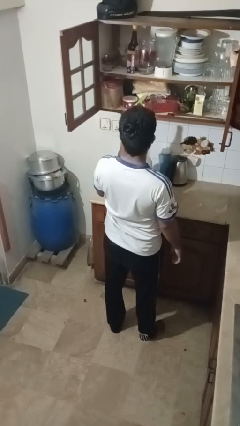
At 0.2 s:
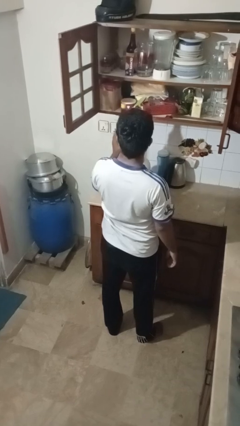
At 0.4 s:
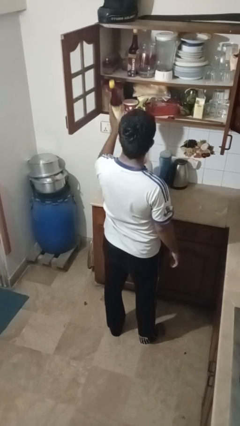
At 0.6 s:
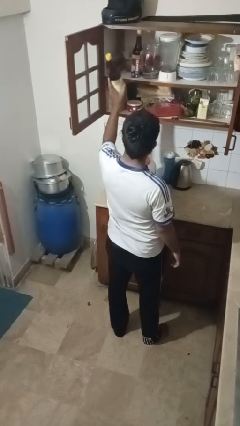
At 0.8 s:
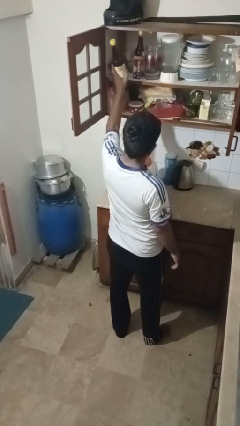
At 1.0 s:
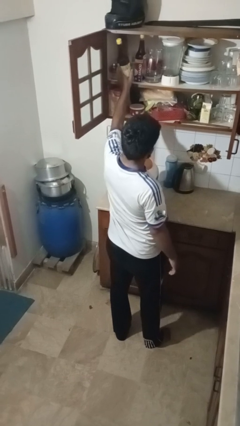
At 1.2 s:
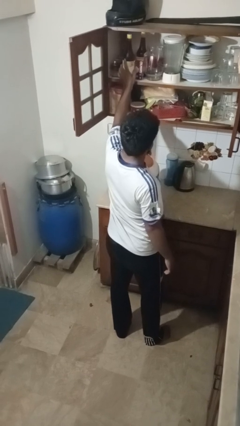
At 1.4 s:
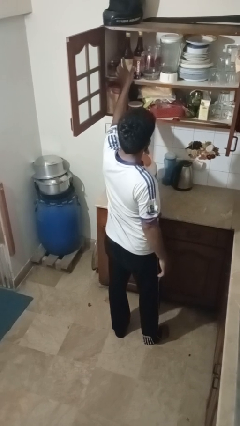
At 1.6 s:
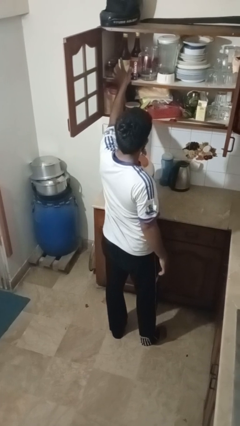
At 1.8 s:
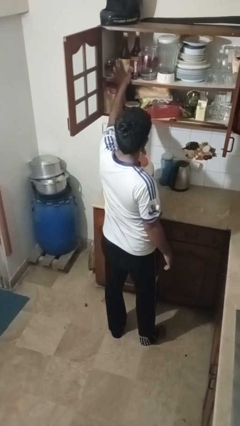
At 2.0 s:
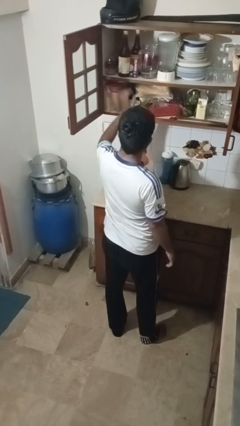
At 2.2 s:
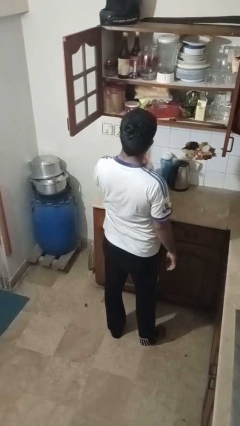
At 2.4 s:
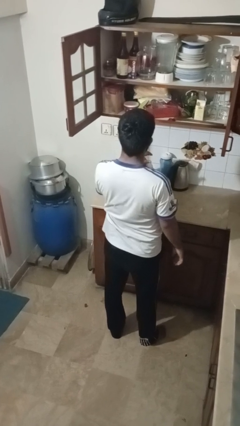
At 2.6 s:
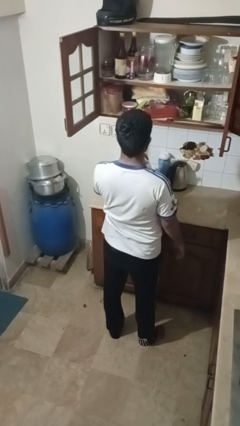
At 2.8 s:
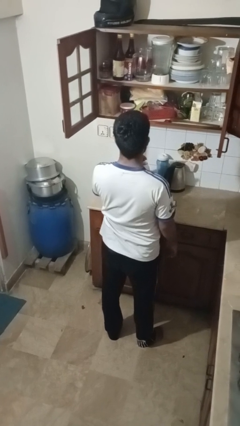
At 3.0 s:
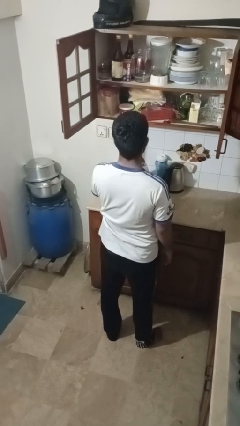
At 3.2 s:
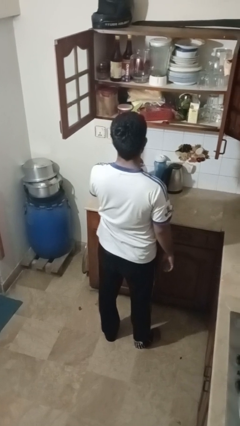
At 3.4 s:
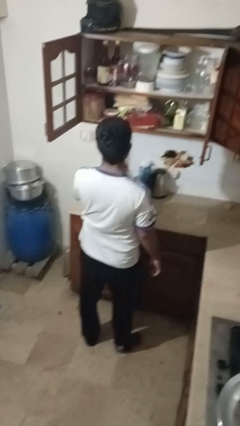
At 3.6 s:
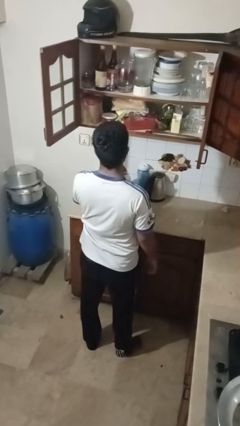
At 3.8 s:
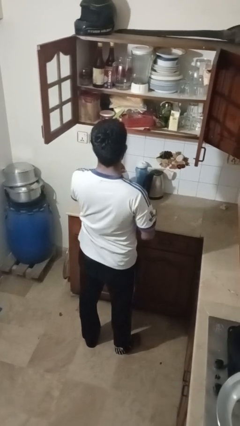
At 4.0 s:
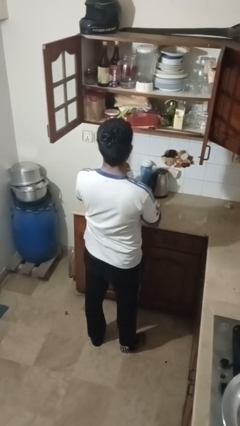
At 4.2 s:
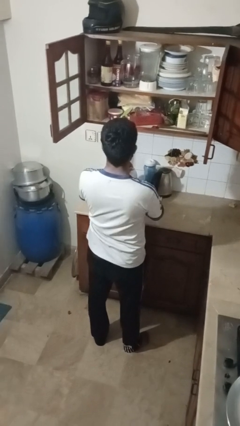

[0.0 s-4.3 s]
person puts object in cabinet

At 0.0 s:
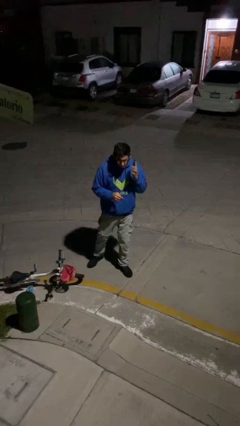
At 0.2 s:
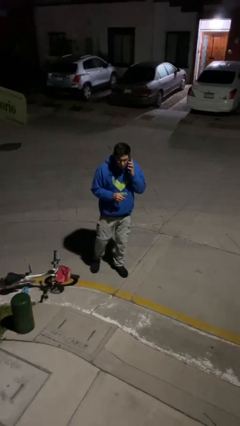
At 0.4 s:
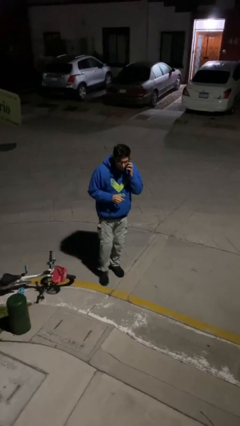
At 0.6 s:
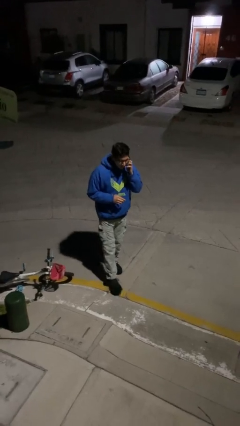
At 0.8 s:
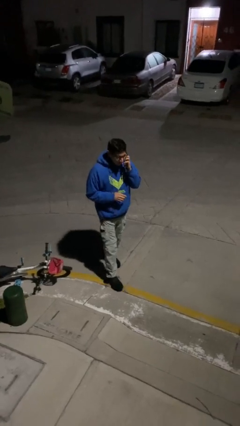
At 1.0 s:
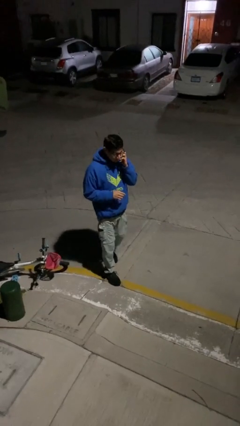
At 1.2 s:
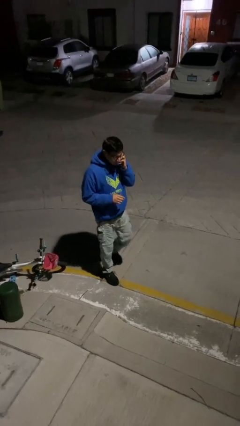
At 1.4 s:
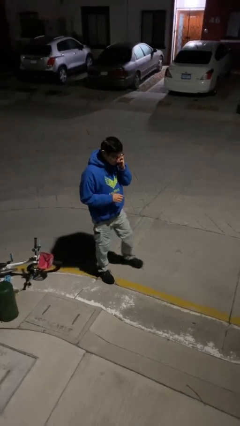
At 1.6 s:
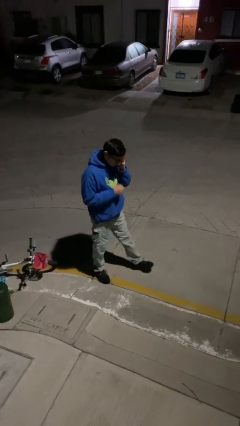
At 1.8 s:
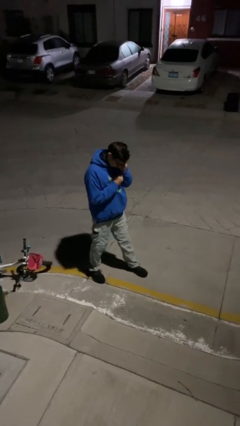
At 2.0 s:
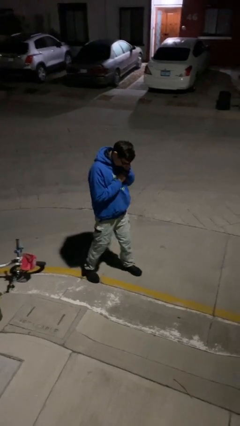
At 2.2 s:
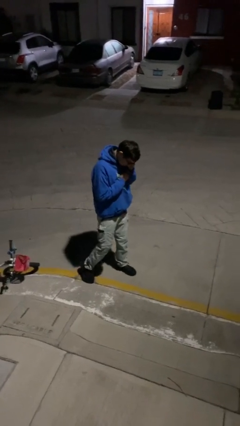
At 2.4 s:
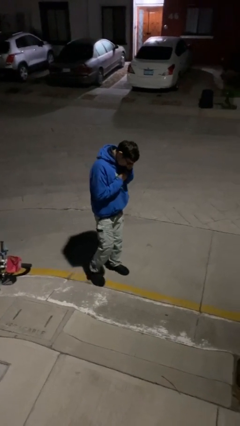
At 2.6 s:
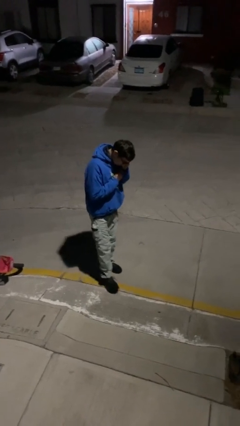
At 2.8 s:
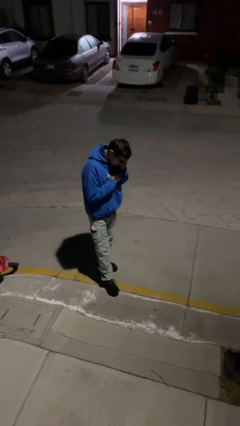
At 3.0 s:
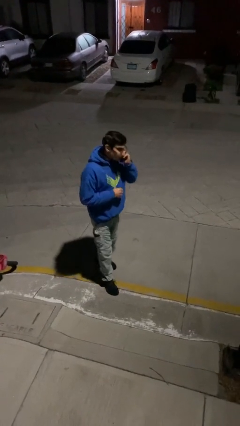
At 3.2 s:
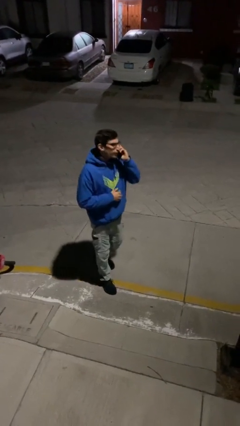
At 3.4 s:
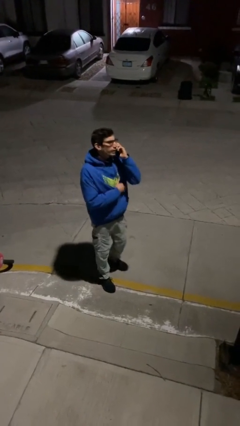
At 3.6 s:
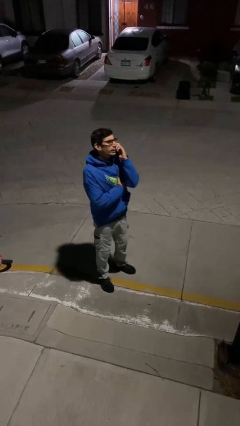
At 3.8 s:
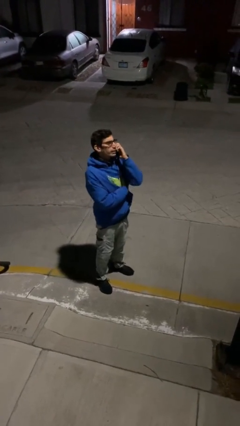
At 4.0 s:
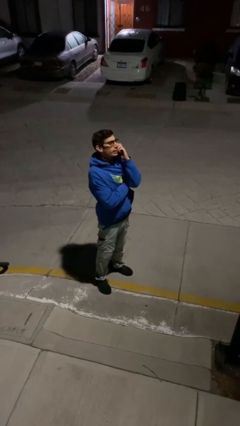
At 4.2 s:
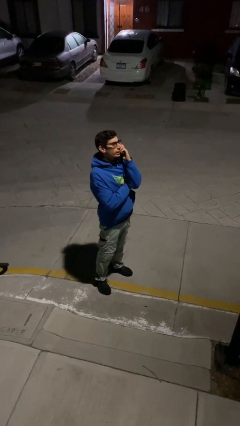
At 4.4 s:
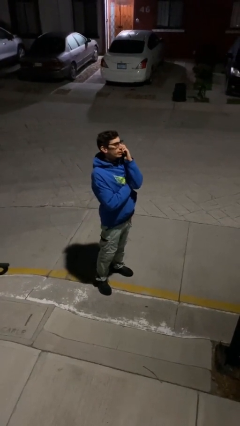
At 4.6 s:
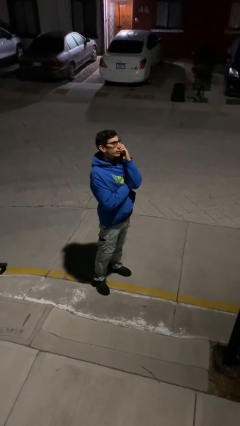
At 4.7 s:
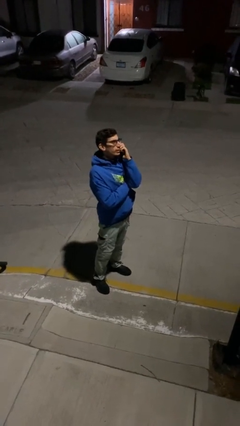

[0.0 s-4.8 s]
person talks on phone

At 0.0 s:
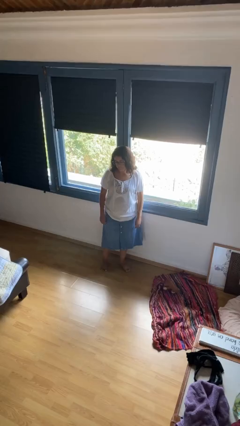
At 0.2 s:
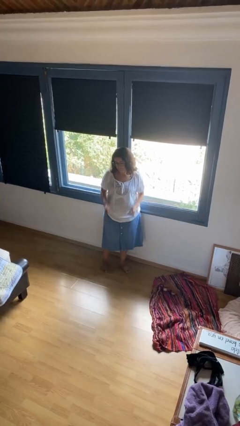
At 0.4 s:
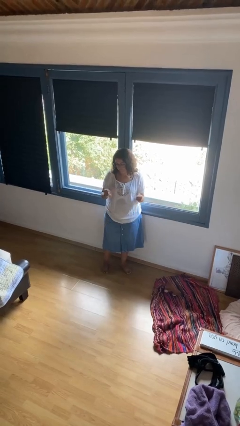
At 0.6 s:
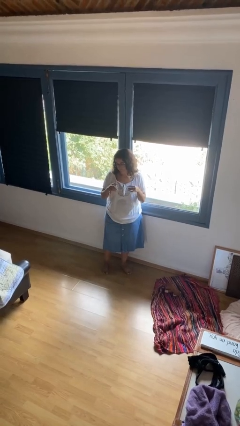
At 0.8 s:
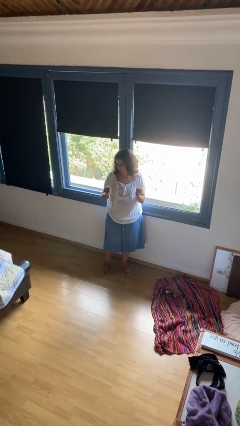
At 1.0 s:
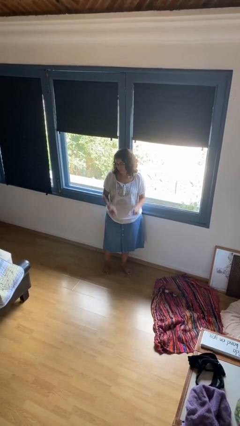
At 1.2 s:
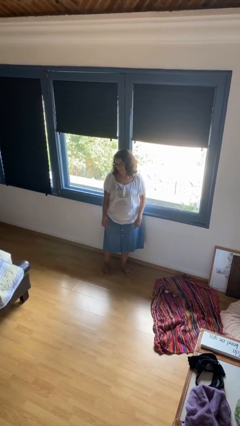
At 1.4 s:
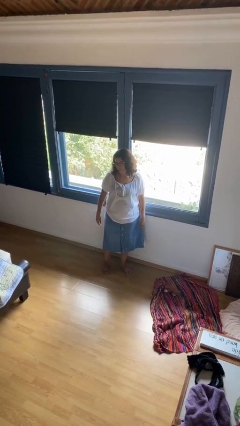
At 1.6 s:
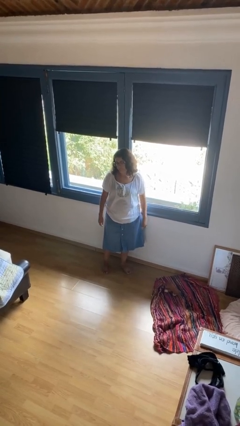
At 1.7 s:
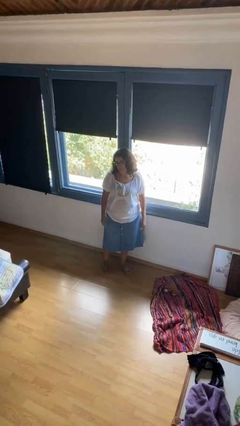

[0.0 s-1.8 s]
person snaps fingers

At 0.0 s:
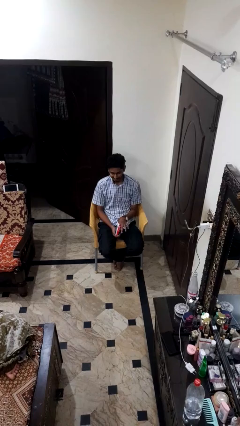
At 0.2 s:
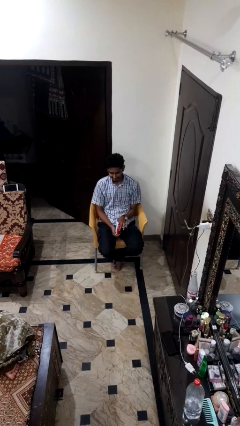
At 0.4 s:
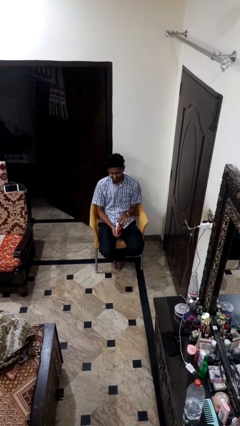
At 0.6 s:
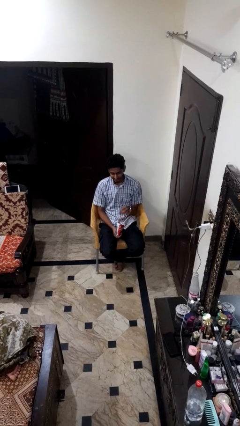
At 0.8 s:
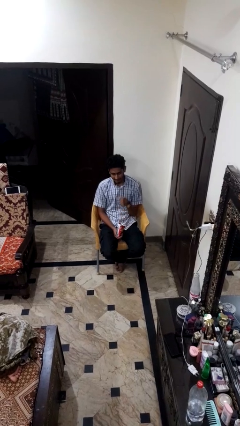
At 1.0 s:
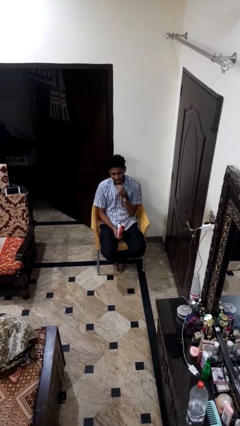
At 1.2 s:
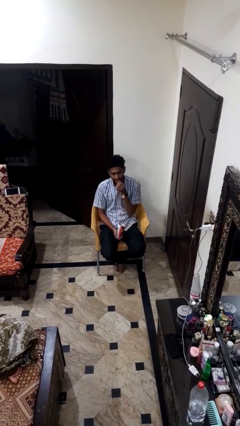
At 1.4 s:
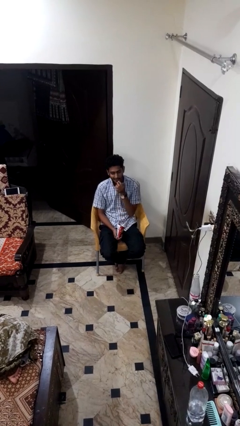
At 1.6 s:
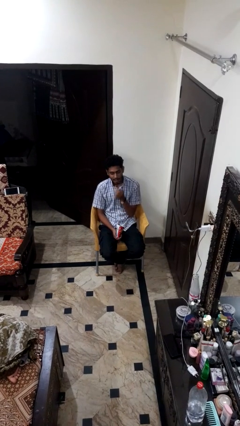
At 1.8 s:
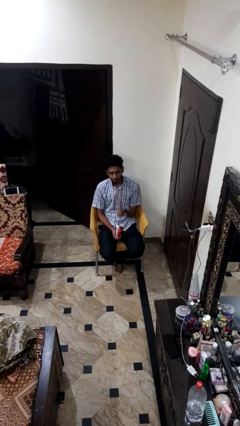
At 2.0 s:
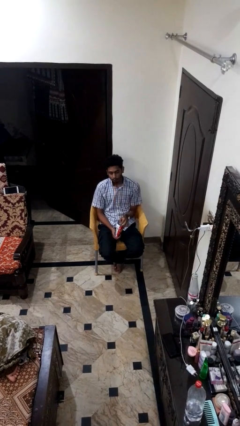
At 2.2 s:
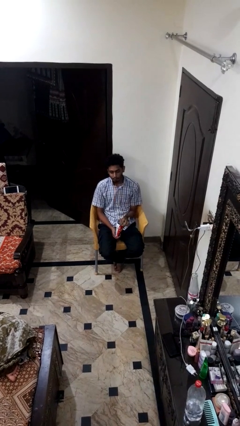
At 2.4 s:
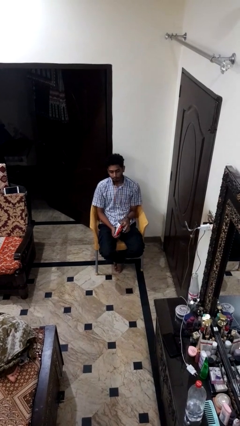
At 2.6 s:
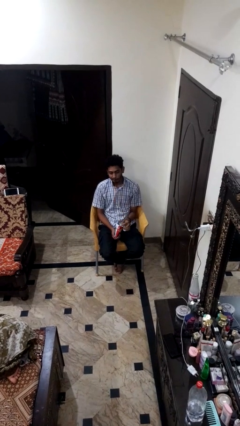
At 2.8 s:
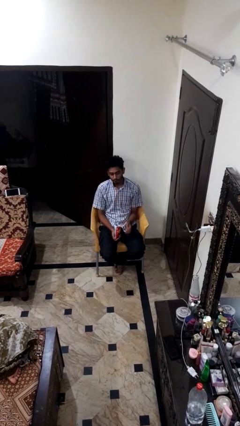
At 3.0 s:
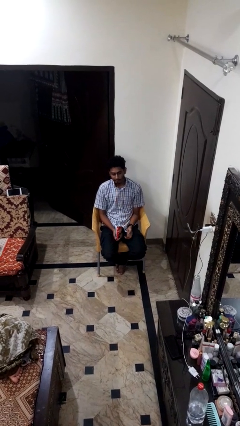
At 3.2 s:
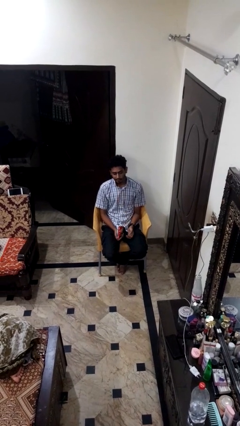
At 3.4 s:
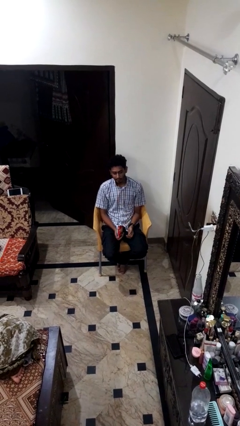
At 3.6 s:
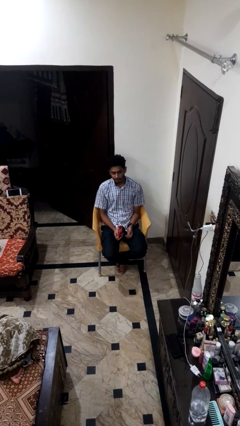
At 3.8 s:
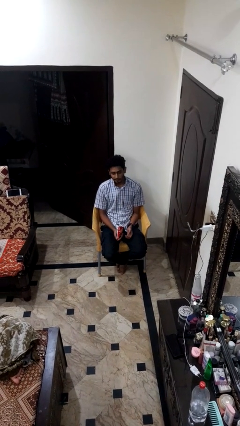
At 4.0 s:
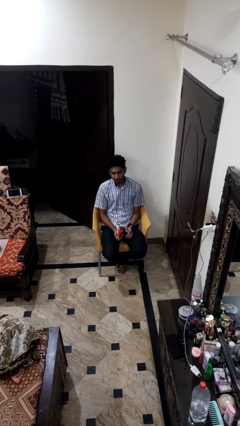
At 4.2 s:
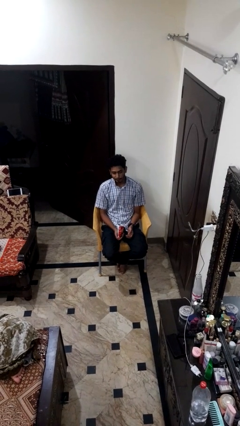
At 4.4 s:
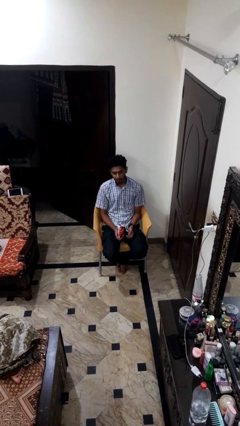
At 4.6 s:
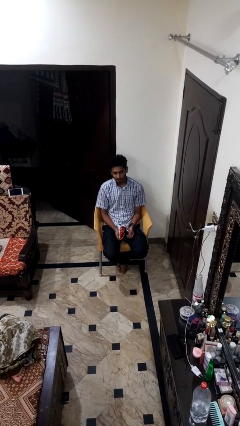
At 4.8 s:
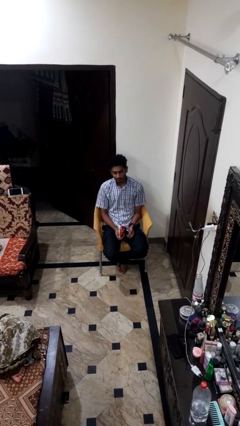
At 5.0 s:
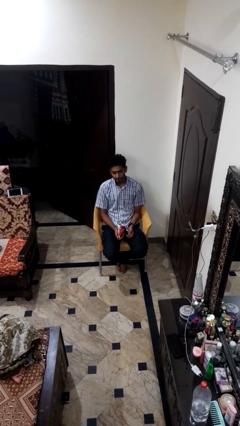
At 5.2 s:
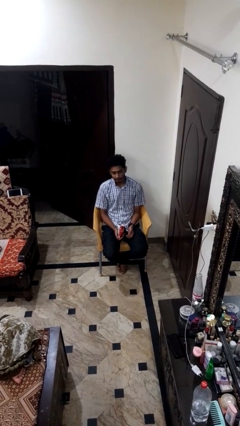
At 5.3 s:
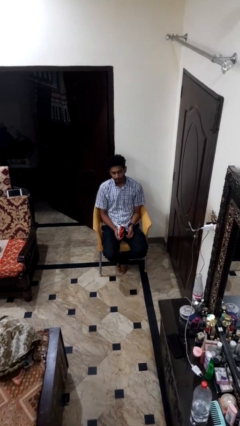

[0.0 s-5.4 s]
person eats snack from bag

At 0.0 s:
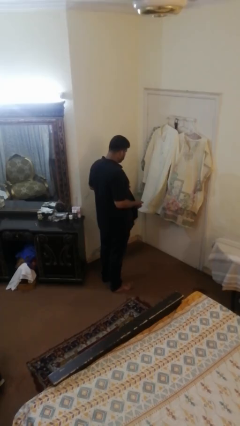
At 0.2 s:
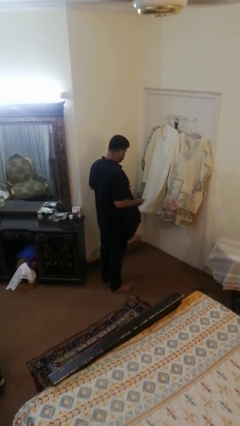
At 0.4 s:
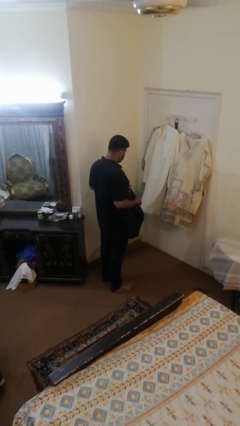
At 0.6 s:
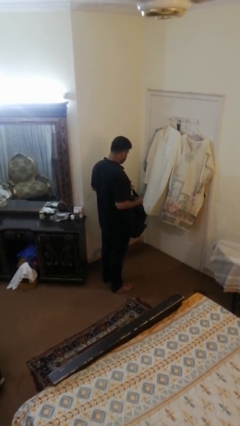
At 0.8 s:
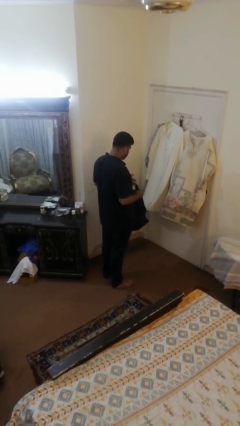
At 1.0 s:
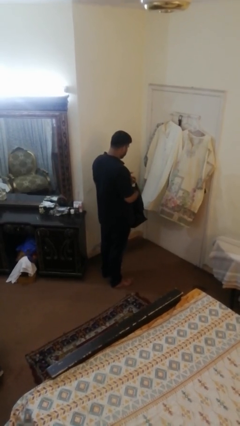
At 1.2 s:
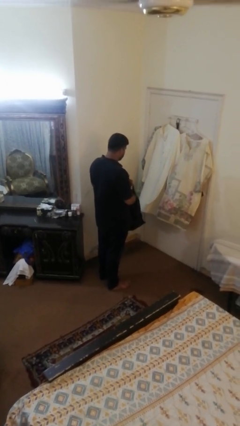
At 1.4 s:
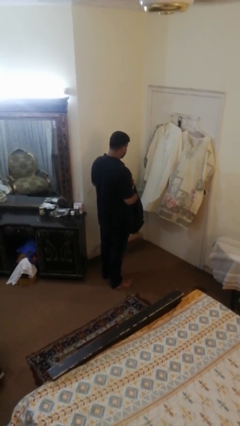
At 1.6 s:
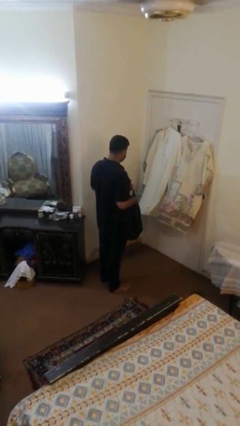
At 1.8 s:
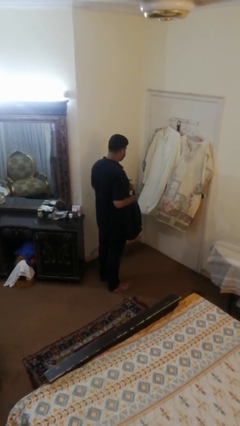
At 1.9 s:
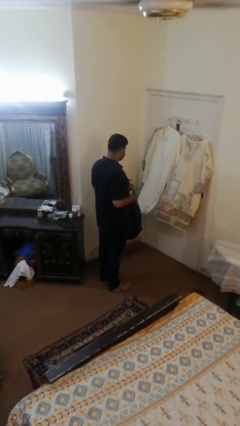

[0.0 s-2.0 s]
person puts object into bag
